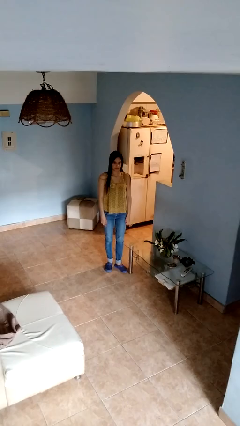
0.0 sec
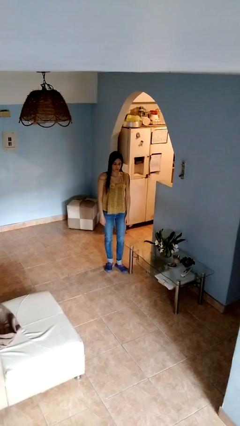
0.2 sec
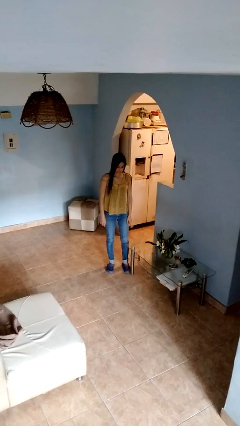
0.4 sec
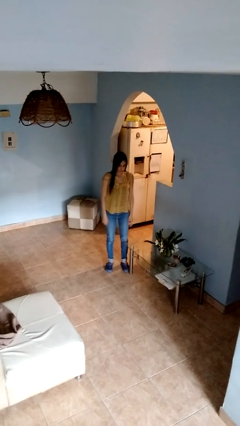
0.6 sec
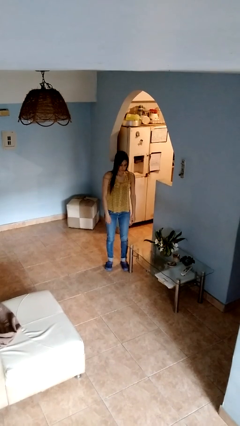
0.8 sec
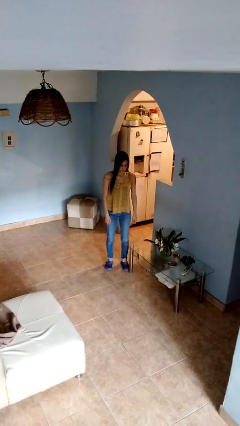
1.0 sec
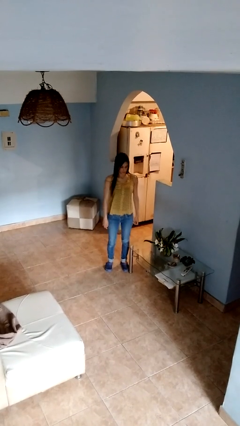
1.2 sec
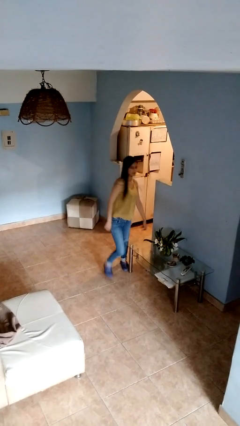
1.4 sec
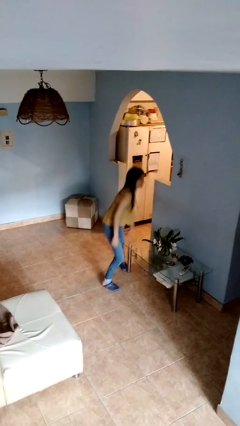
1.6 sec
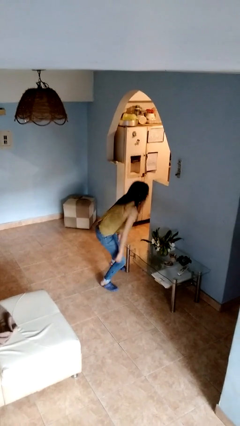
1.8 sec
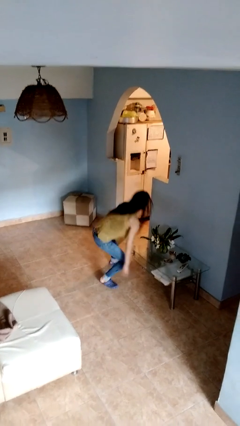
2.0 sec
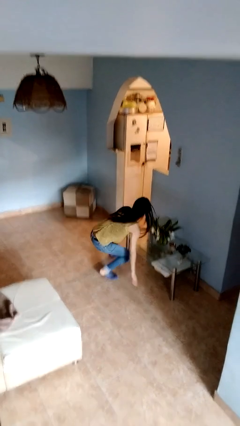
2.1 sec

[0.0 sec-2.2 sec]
person trips on object on floor

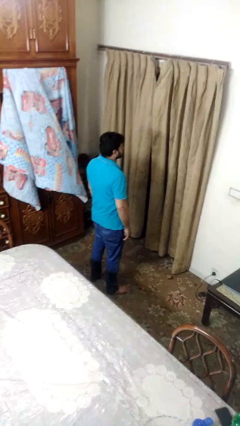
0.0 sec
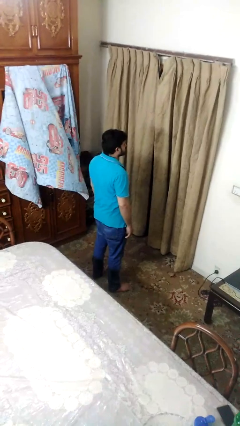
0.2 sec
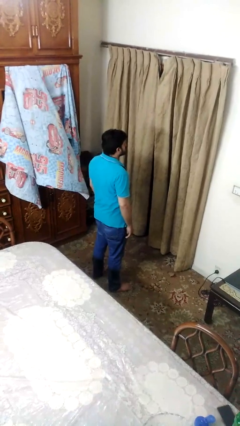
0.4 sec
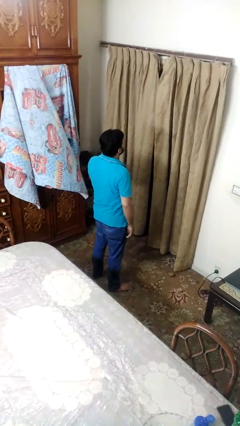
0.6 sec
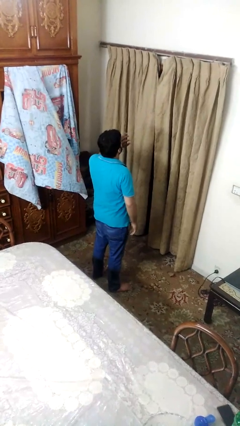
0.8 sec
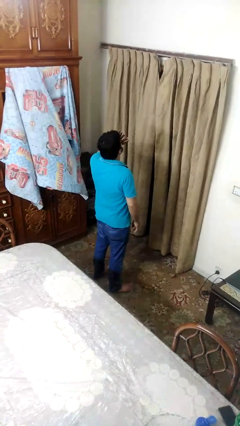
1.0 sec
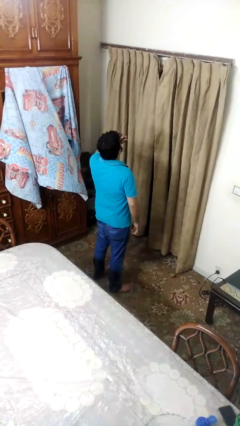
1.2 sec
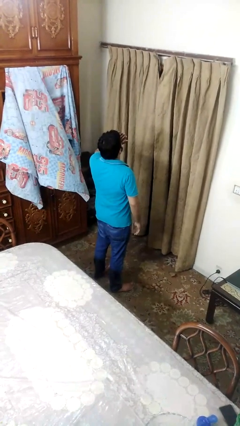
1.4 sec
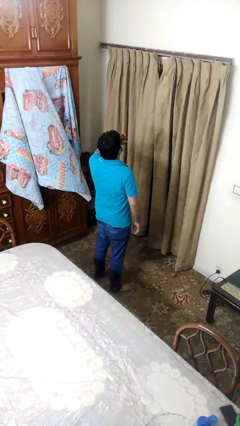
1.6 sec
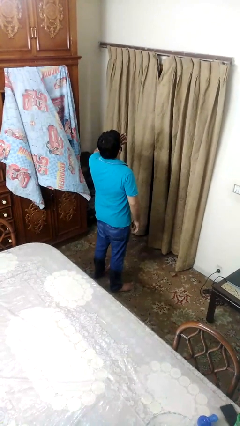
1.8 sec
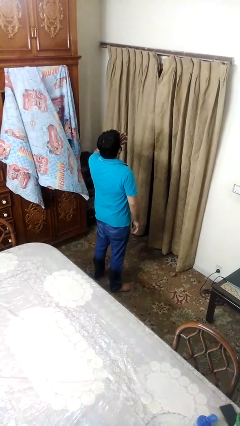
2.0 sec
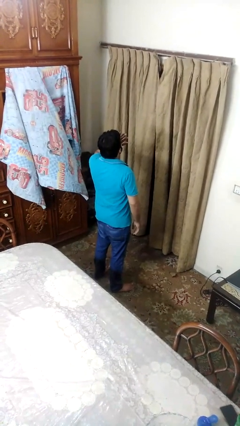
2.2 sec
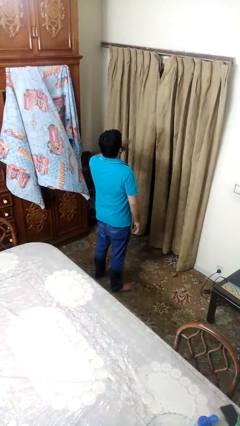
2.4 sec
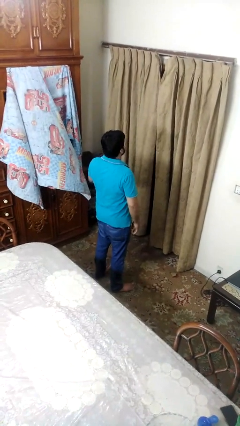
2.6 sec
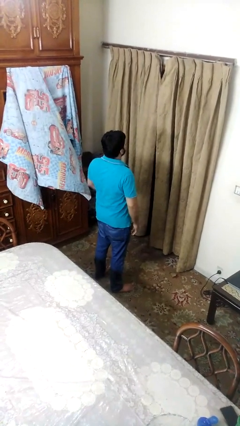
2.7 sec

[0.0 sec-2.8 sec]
person yawns

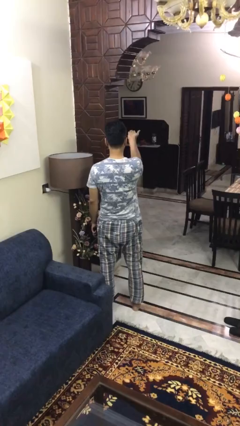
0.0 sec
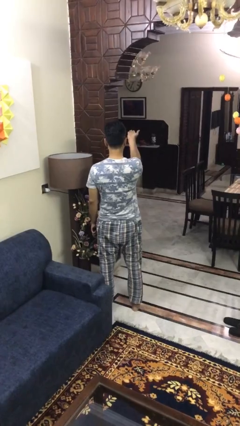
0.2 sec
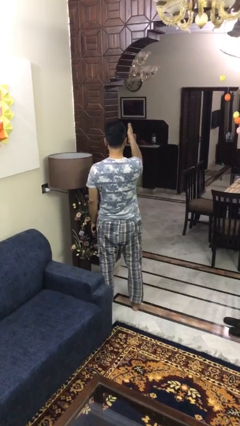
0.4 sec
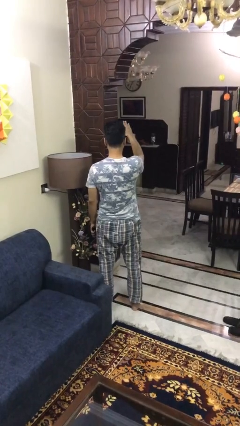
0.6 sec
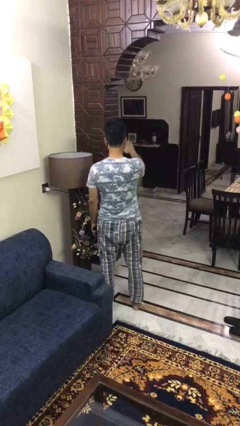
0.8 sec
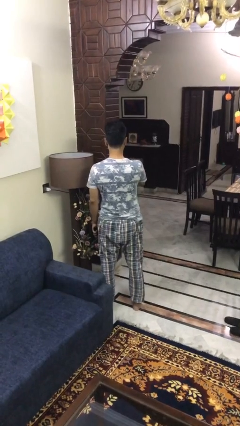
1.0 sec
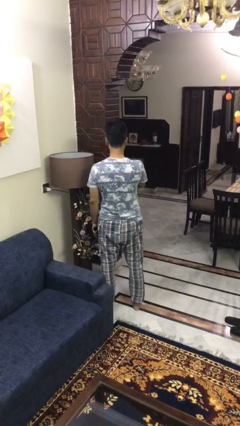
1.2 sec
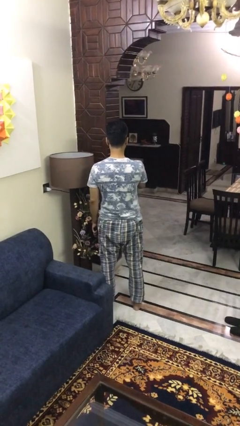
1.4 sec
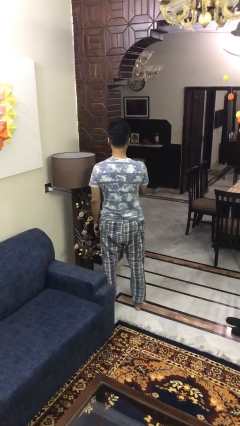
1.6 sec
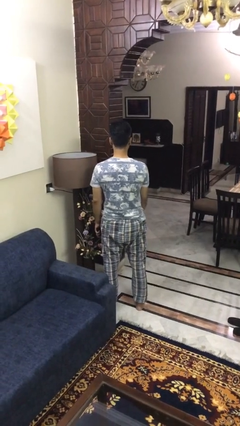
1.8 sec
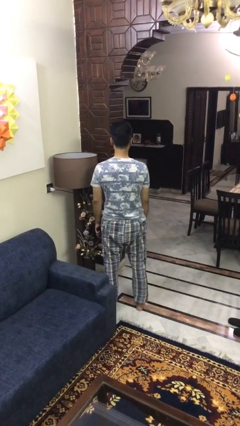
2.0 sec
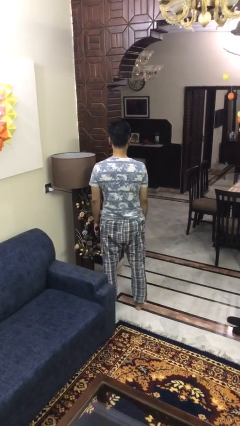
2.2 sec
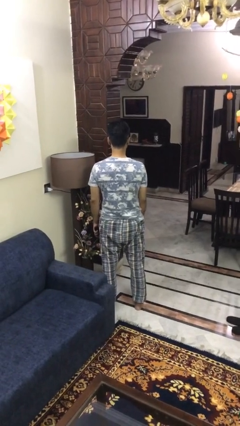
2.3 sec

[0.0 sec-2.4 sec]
person gestures swipe down

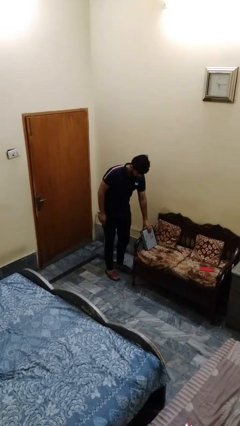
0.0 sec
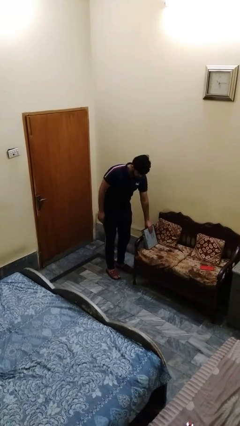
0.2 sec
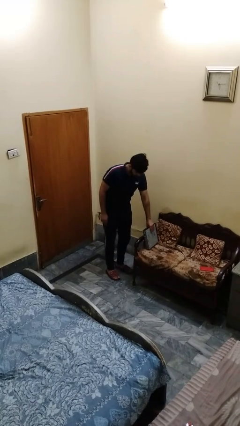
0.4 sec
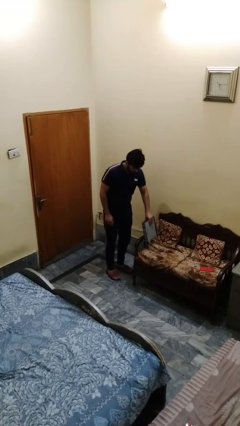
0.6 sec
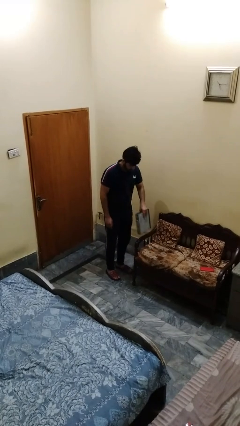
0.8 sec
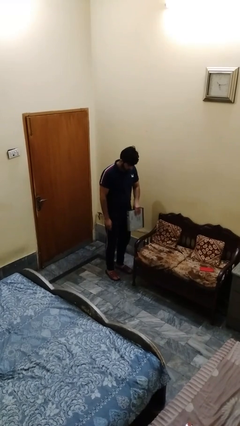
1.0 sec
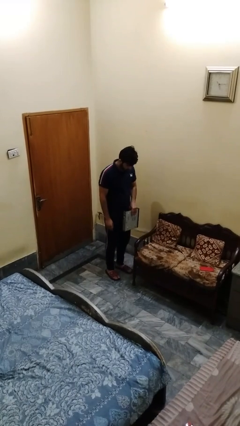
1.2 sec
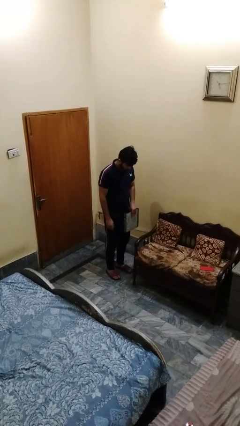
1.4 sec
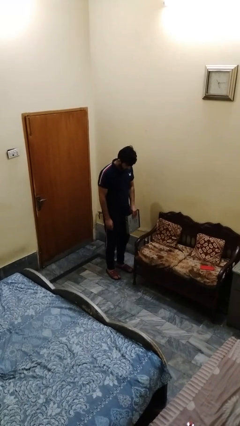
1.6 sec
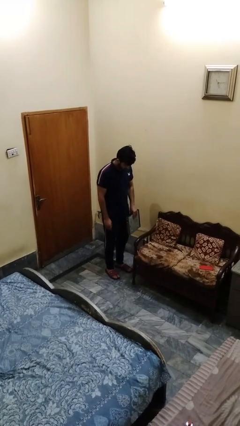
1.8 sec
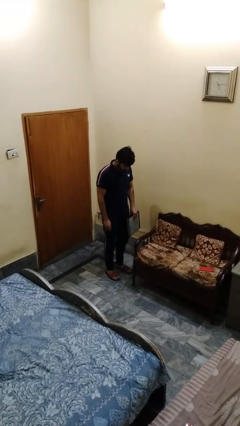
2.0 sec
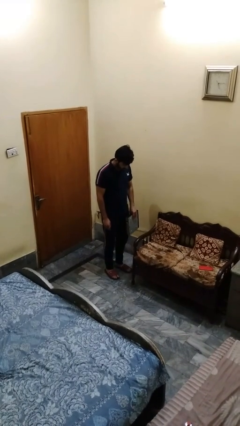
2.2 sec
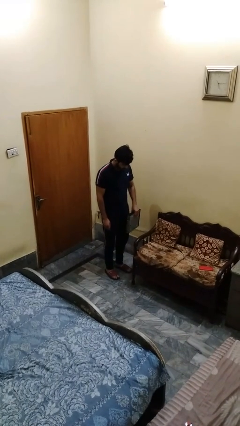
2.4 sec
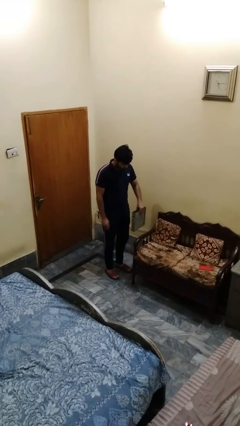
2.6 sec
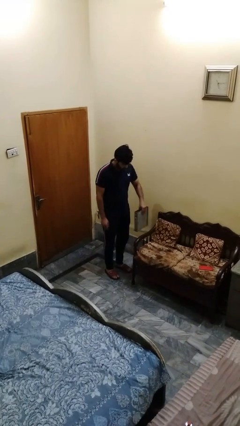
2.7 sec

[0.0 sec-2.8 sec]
person picks up object from couch

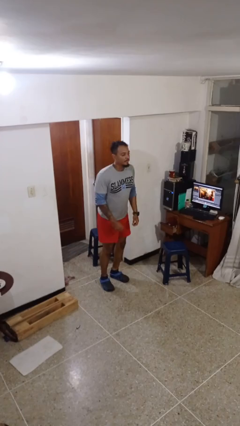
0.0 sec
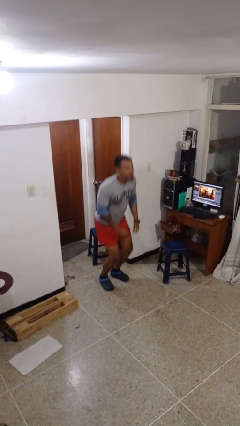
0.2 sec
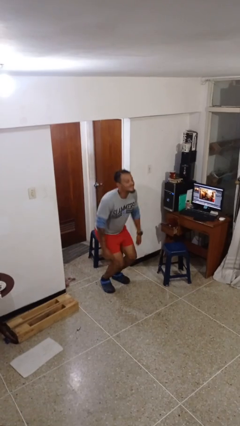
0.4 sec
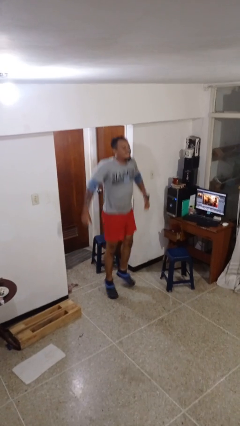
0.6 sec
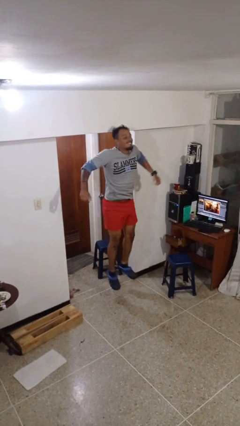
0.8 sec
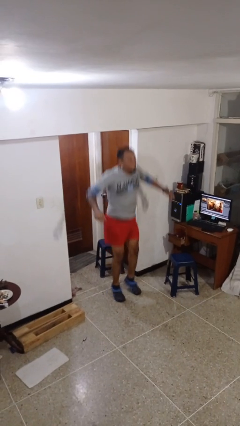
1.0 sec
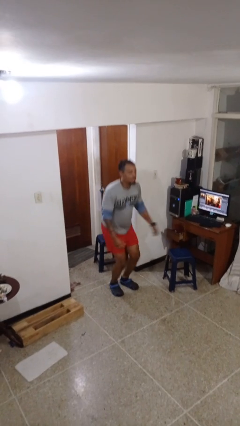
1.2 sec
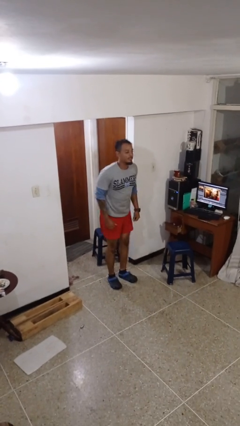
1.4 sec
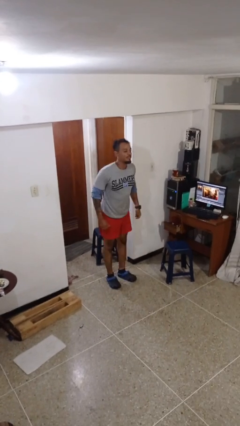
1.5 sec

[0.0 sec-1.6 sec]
person jumps

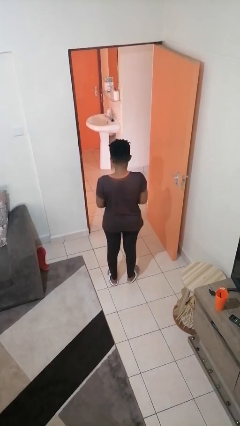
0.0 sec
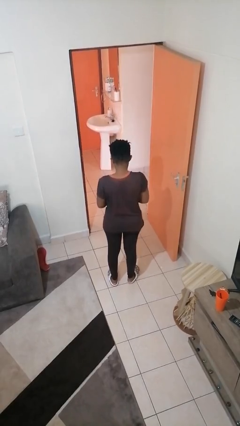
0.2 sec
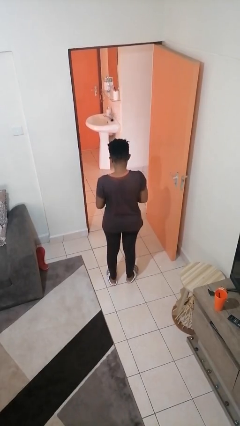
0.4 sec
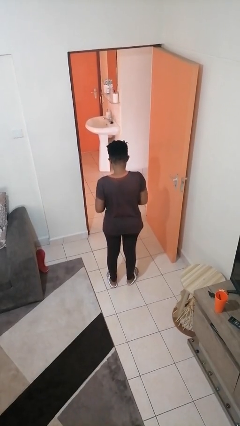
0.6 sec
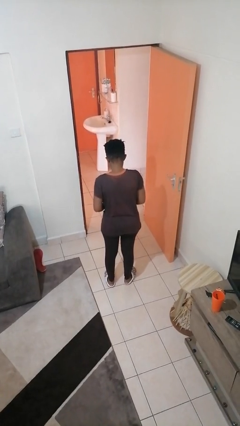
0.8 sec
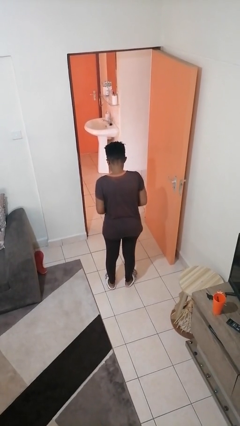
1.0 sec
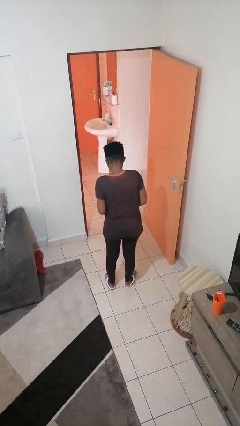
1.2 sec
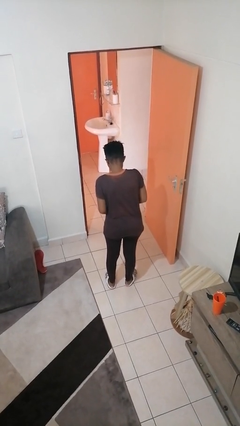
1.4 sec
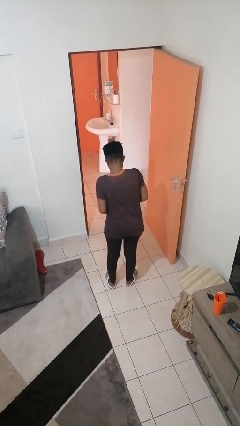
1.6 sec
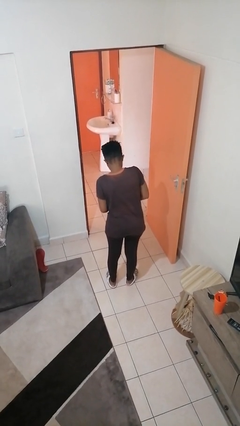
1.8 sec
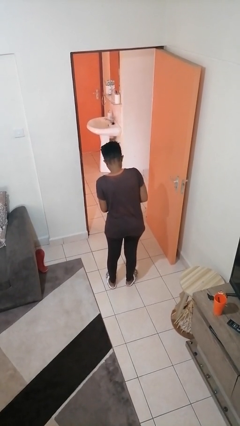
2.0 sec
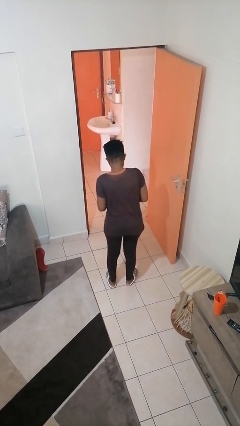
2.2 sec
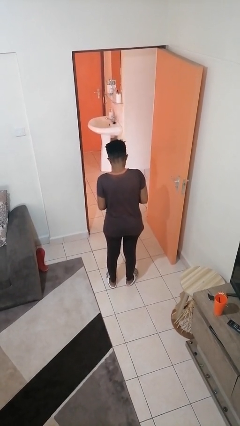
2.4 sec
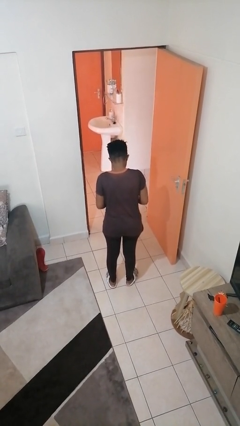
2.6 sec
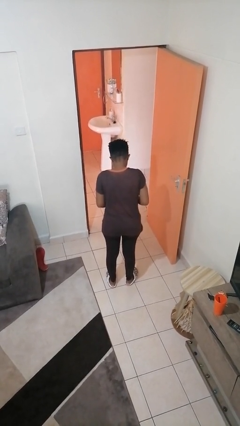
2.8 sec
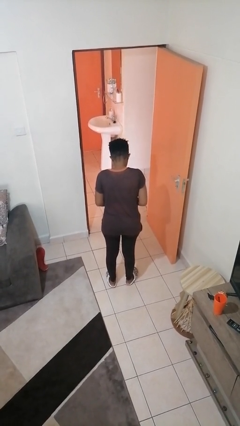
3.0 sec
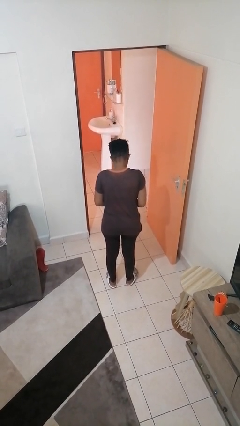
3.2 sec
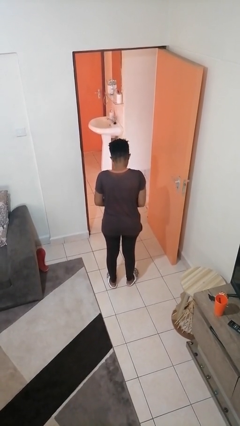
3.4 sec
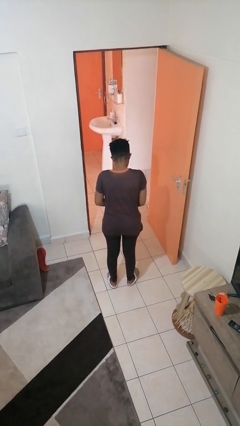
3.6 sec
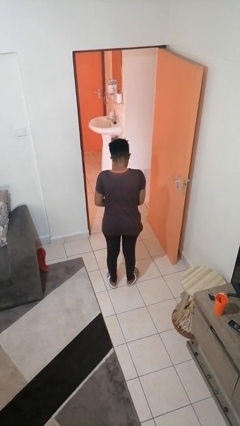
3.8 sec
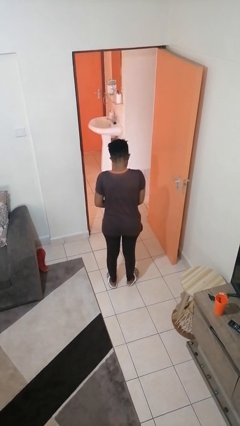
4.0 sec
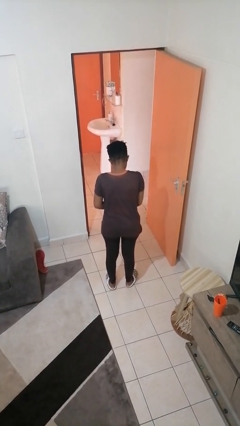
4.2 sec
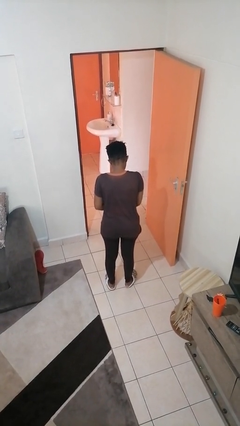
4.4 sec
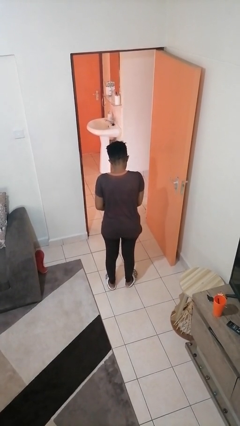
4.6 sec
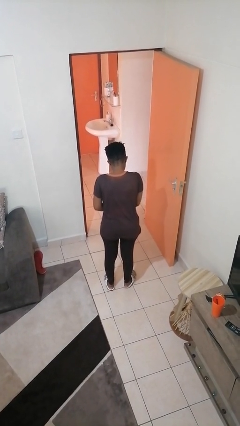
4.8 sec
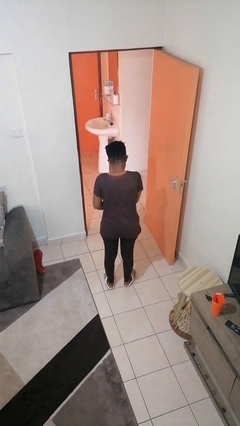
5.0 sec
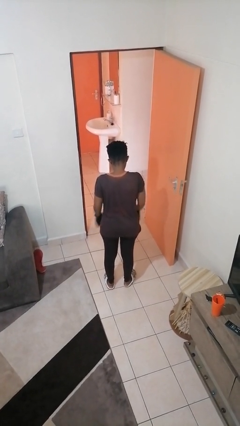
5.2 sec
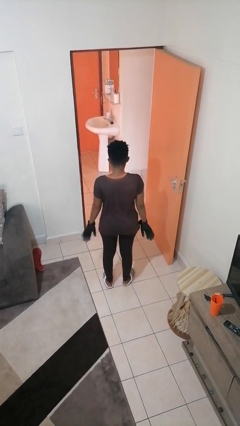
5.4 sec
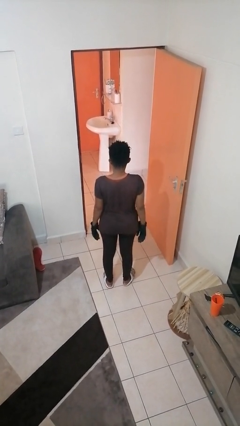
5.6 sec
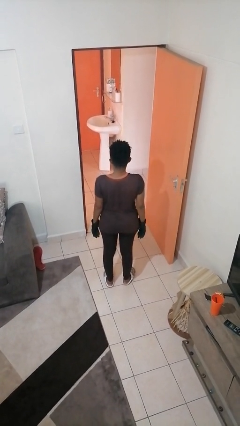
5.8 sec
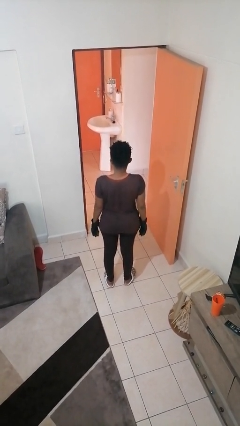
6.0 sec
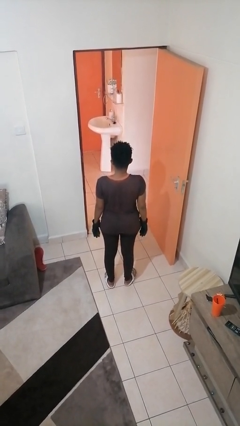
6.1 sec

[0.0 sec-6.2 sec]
person puts on gloves
